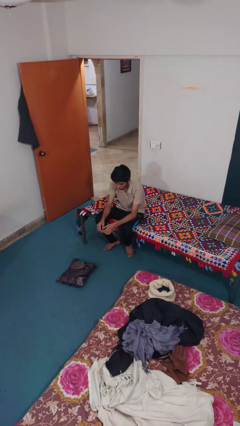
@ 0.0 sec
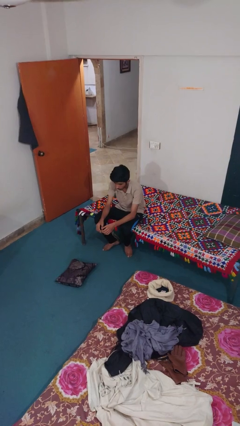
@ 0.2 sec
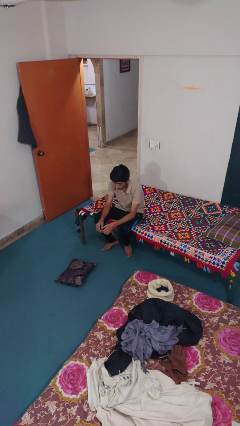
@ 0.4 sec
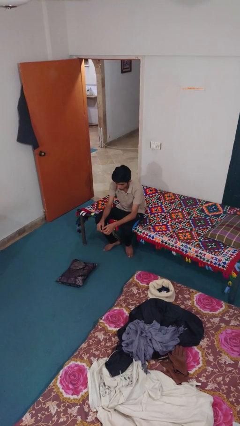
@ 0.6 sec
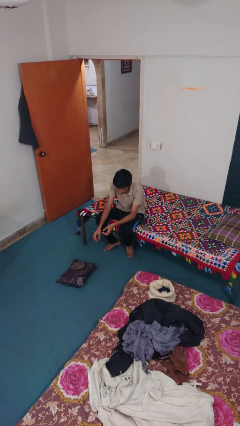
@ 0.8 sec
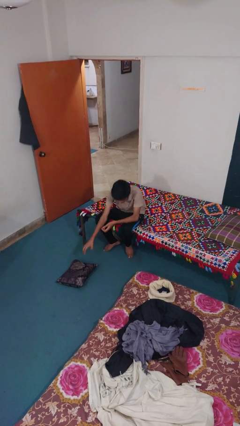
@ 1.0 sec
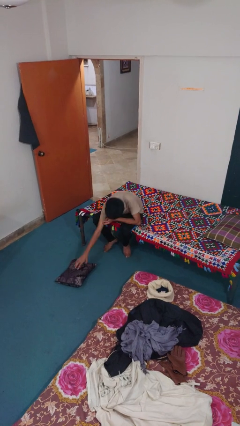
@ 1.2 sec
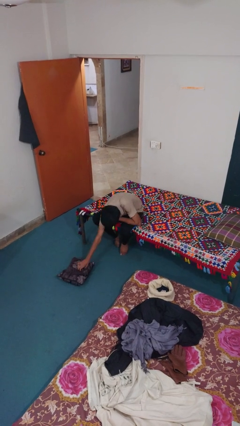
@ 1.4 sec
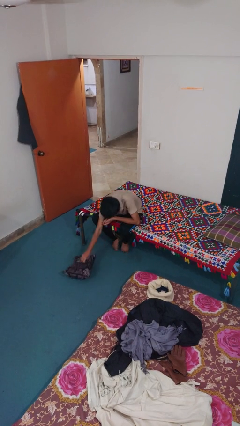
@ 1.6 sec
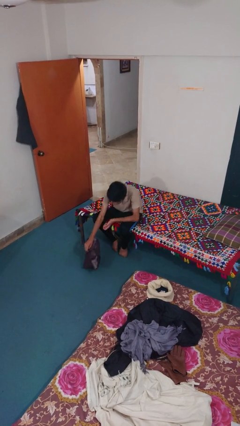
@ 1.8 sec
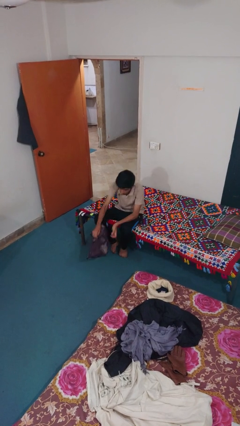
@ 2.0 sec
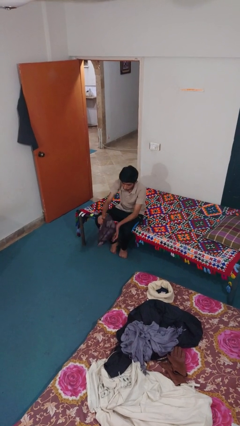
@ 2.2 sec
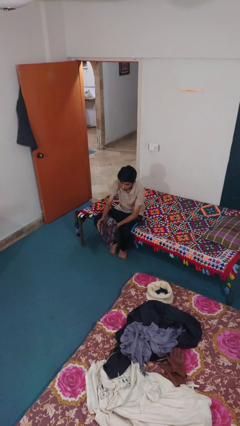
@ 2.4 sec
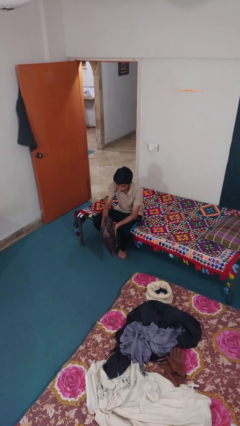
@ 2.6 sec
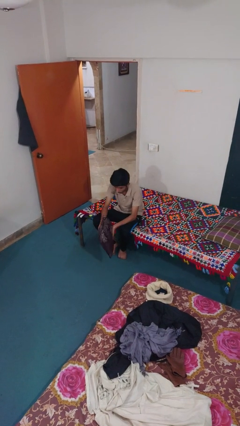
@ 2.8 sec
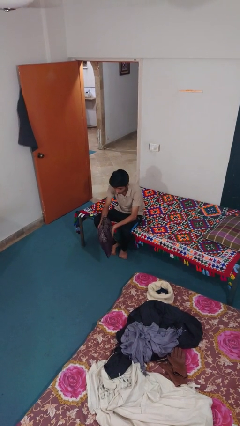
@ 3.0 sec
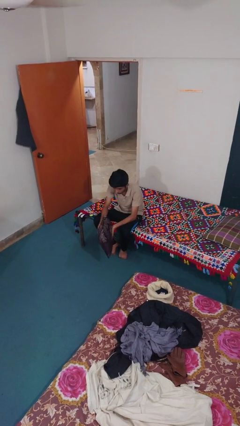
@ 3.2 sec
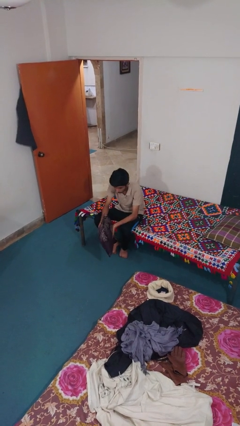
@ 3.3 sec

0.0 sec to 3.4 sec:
person picks up object from floor

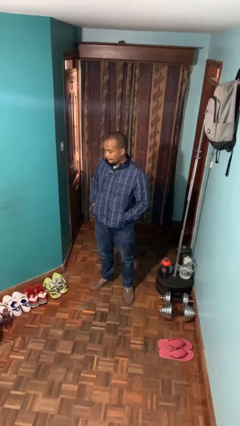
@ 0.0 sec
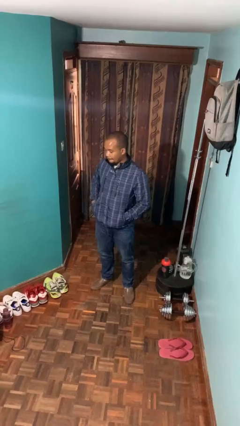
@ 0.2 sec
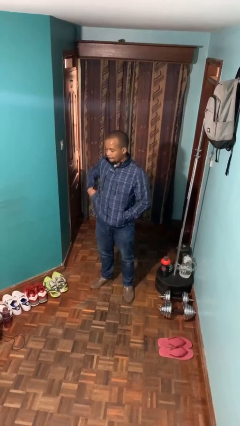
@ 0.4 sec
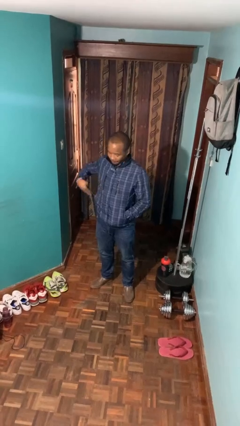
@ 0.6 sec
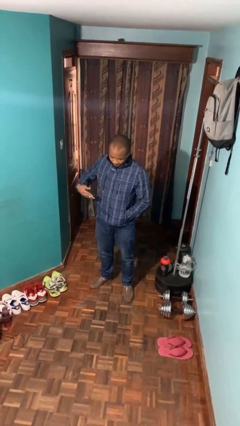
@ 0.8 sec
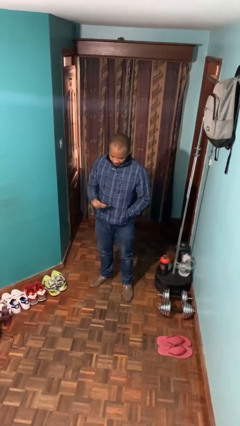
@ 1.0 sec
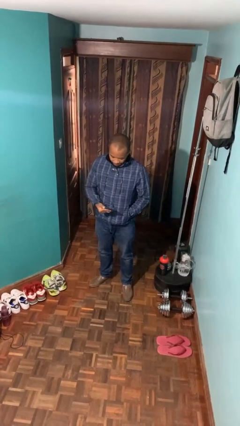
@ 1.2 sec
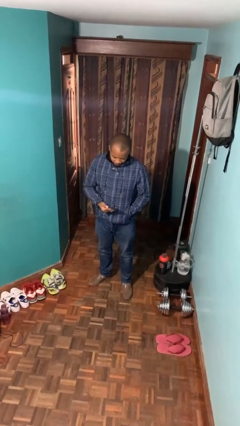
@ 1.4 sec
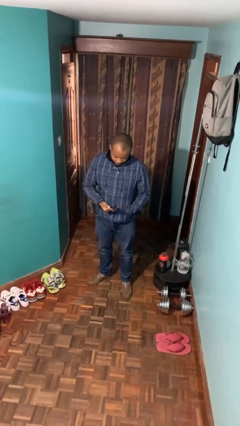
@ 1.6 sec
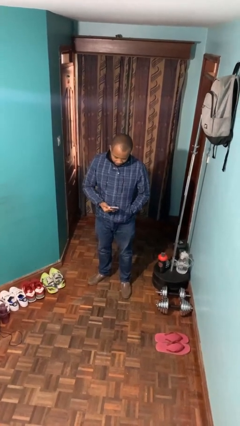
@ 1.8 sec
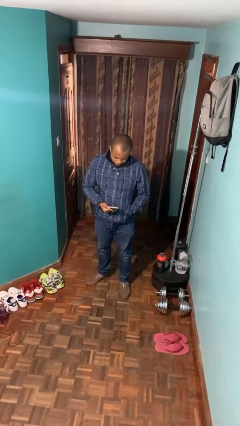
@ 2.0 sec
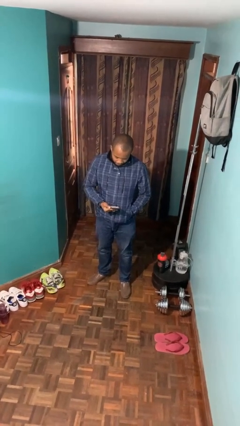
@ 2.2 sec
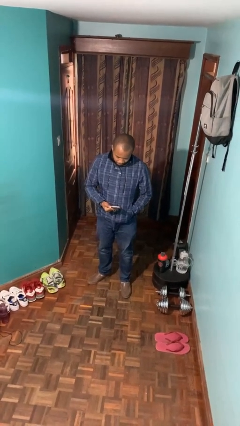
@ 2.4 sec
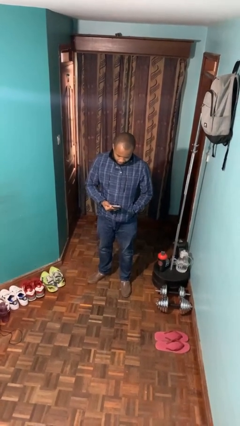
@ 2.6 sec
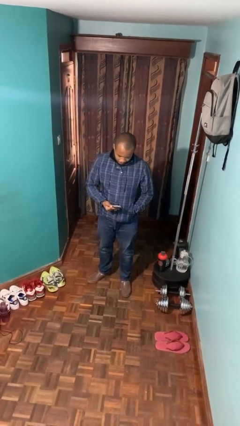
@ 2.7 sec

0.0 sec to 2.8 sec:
person takes phone from pocket

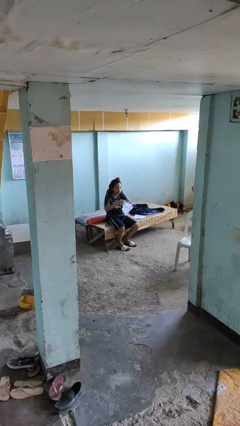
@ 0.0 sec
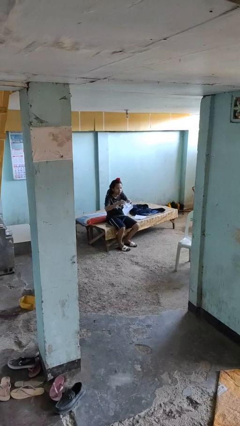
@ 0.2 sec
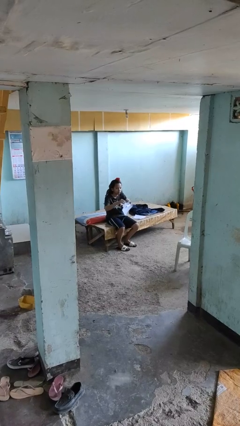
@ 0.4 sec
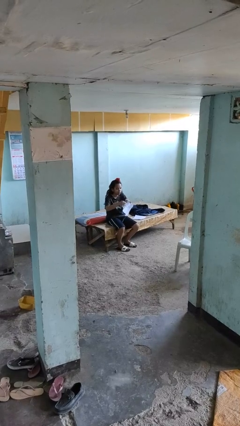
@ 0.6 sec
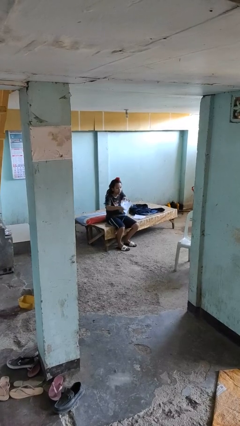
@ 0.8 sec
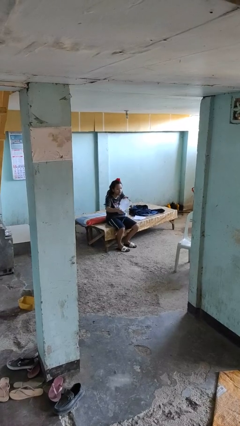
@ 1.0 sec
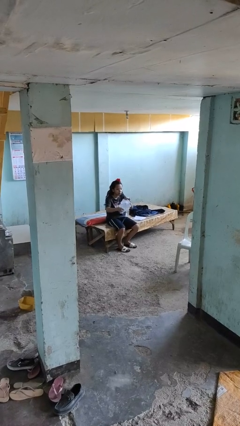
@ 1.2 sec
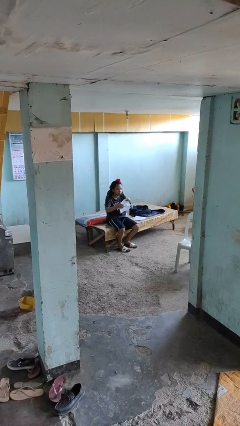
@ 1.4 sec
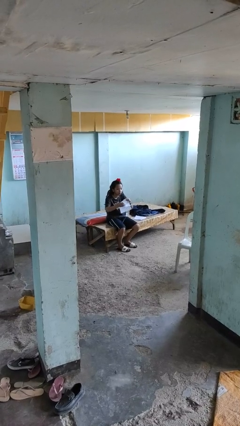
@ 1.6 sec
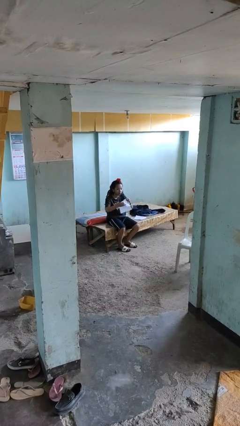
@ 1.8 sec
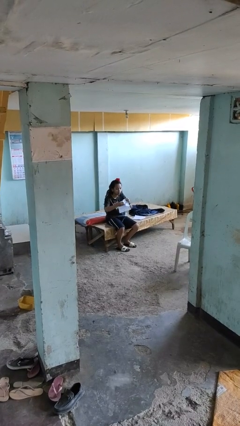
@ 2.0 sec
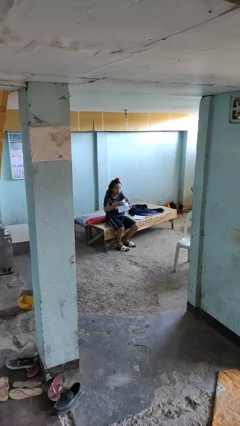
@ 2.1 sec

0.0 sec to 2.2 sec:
person tears paper

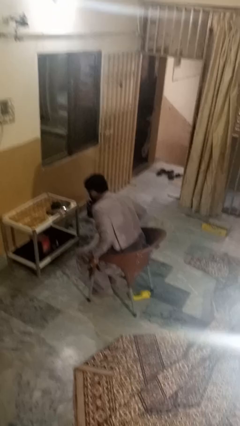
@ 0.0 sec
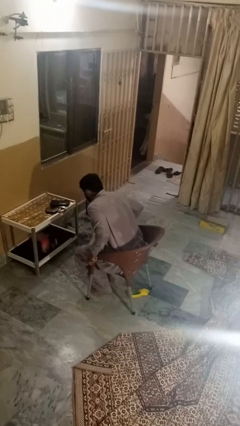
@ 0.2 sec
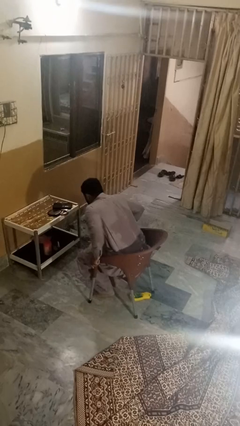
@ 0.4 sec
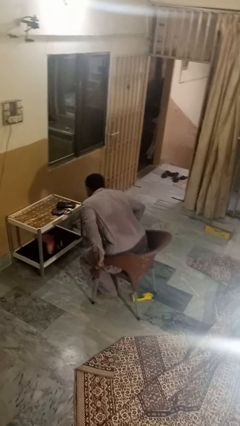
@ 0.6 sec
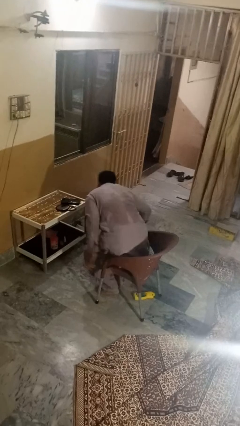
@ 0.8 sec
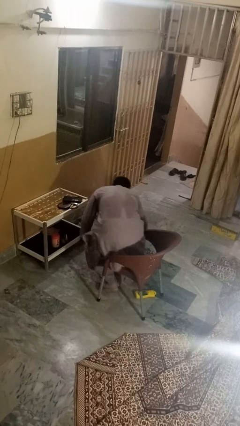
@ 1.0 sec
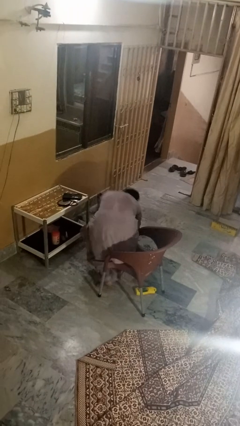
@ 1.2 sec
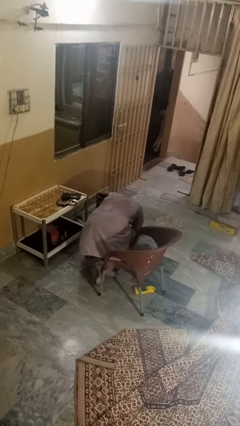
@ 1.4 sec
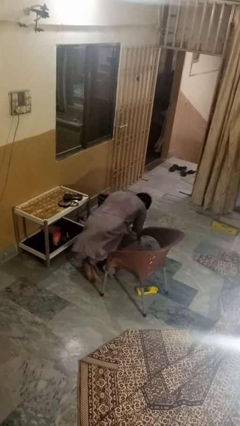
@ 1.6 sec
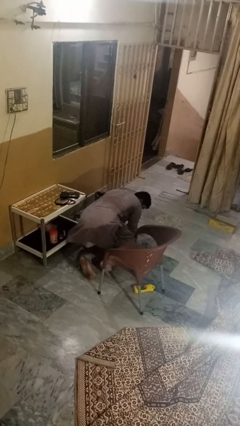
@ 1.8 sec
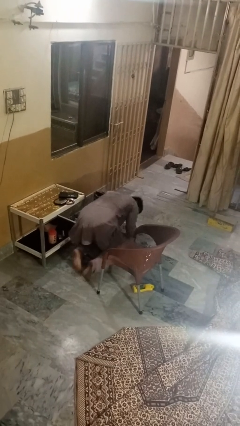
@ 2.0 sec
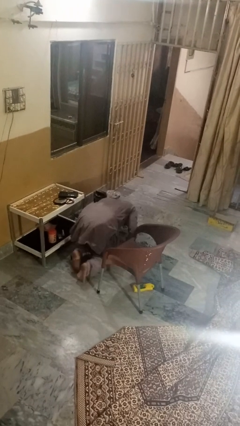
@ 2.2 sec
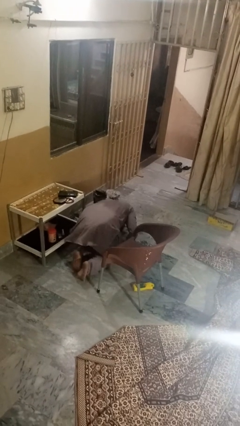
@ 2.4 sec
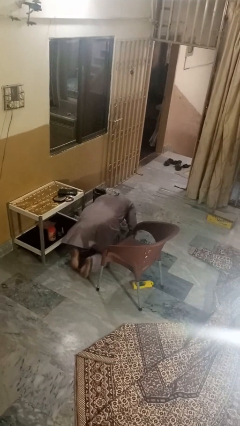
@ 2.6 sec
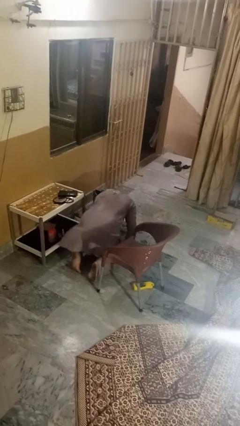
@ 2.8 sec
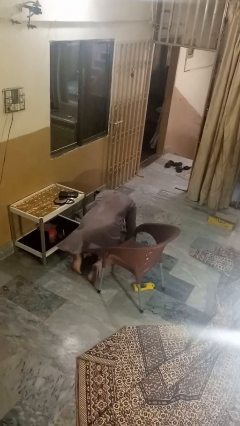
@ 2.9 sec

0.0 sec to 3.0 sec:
person falls from chair

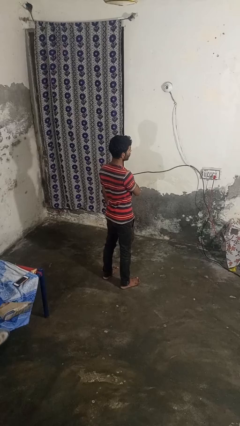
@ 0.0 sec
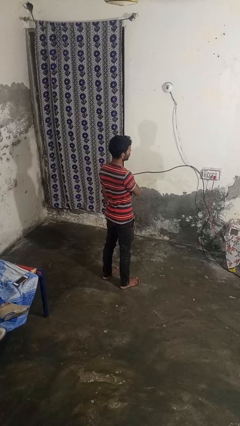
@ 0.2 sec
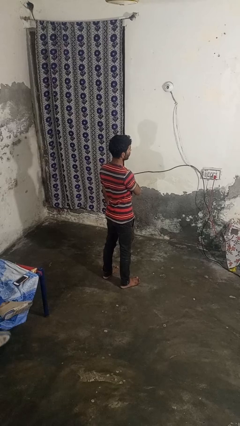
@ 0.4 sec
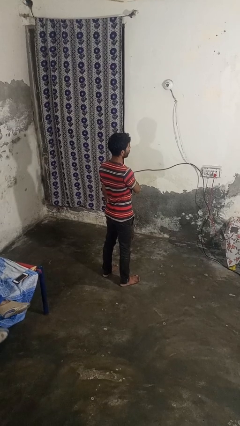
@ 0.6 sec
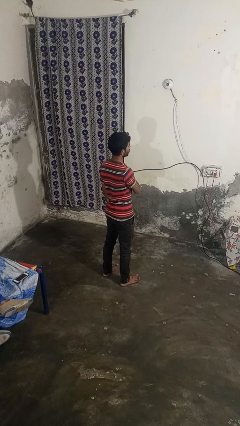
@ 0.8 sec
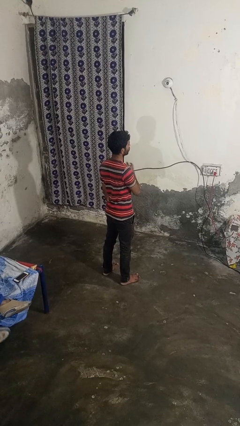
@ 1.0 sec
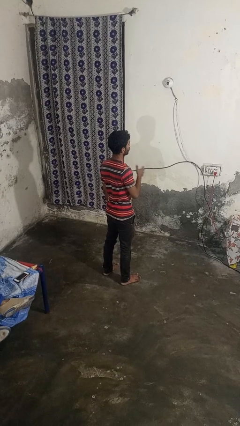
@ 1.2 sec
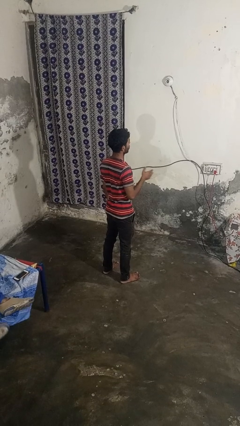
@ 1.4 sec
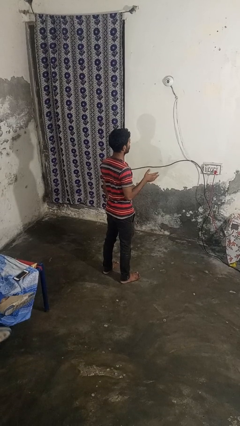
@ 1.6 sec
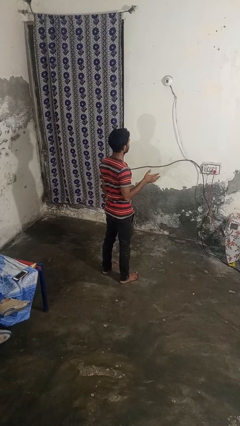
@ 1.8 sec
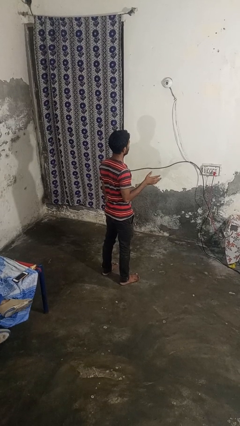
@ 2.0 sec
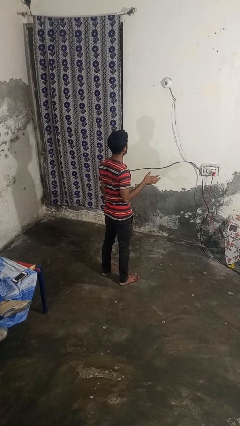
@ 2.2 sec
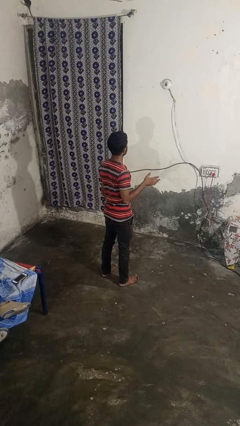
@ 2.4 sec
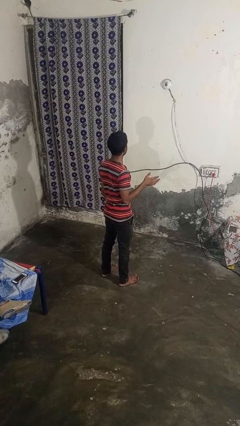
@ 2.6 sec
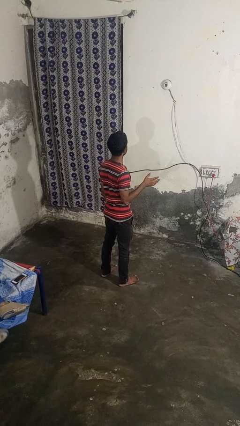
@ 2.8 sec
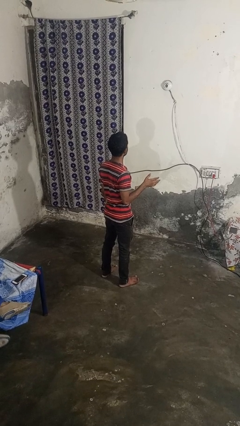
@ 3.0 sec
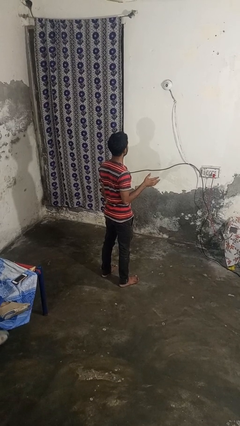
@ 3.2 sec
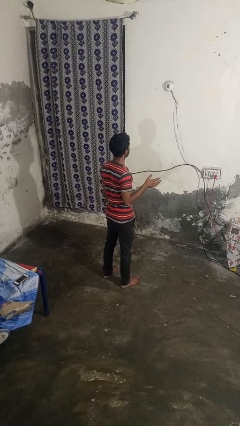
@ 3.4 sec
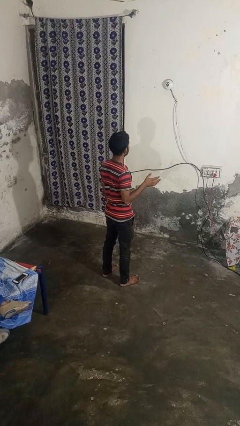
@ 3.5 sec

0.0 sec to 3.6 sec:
person gestures swipe right

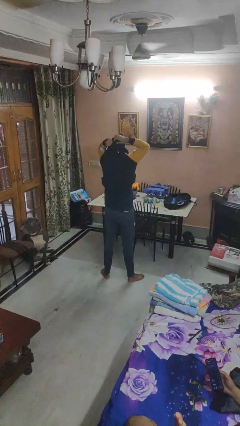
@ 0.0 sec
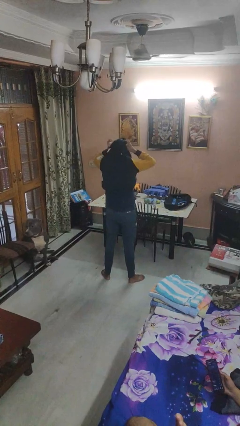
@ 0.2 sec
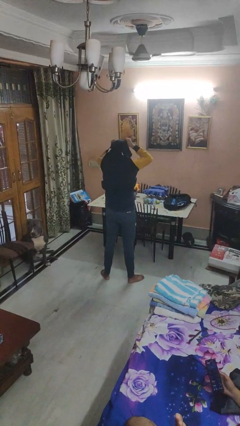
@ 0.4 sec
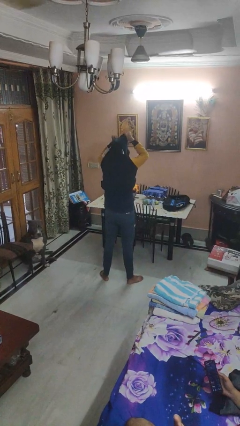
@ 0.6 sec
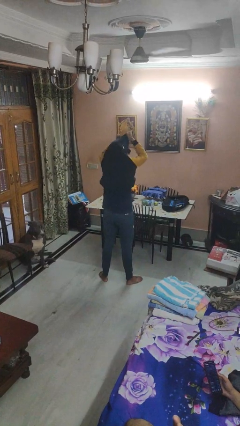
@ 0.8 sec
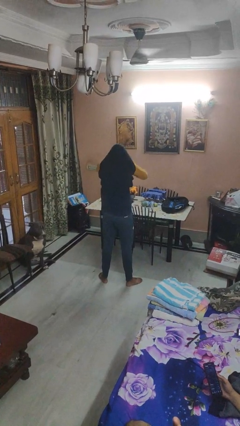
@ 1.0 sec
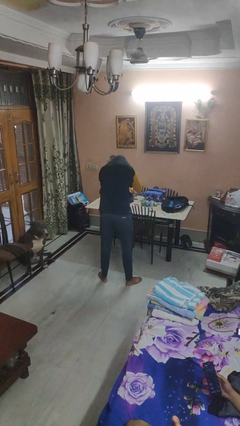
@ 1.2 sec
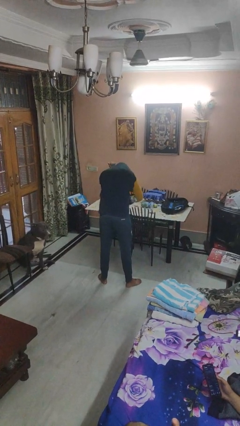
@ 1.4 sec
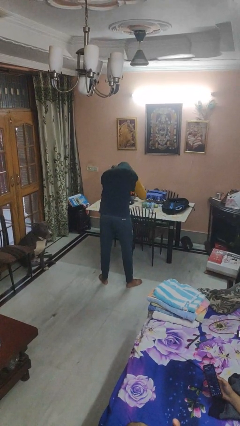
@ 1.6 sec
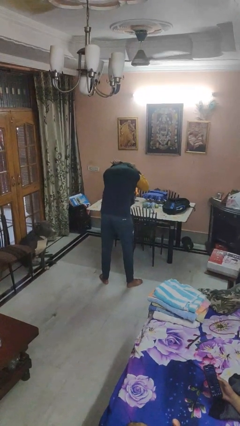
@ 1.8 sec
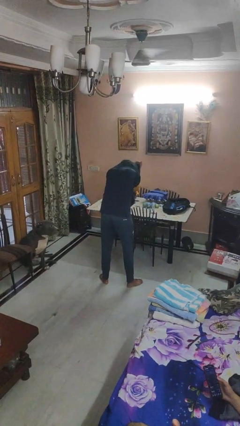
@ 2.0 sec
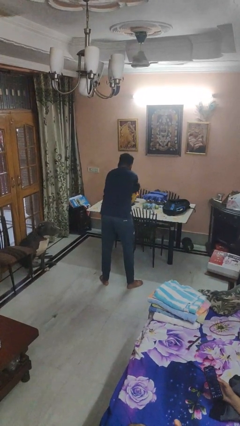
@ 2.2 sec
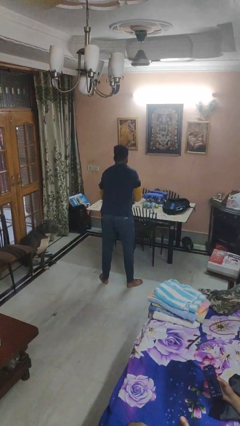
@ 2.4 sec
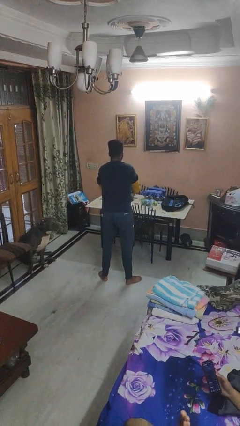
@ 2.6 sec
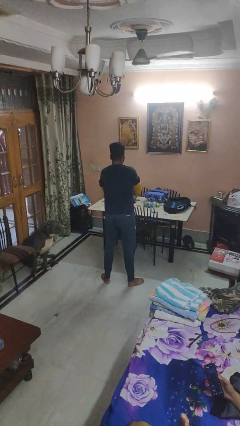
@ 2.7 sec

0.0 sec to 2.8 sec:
person takes off hoodie
